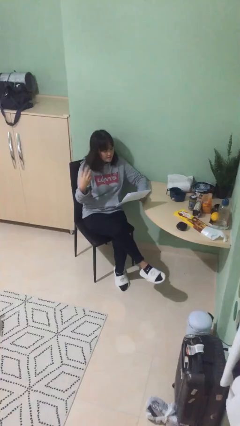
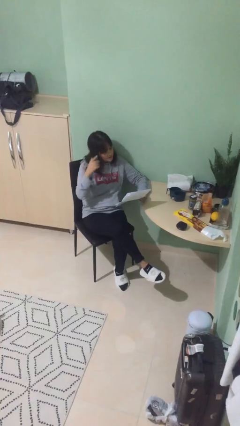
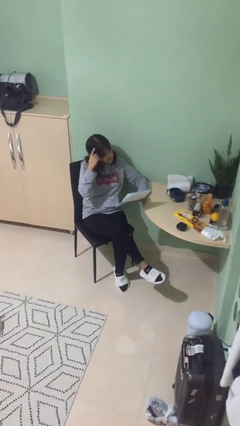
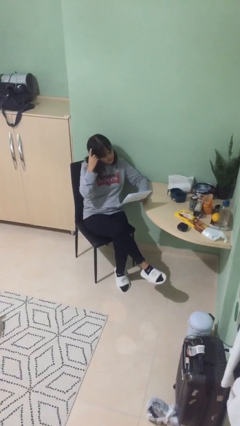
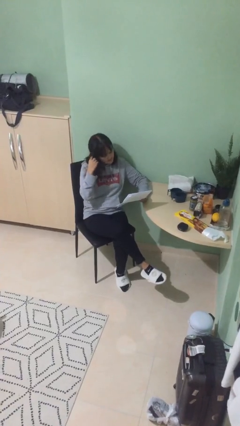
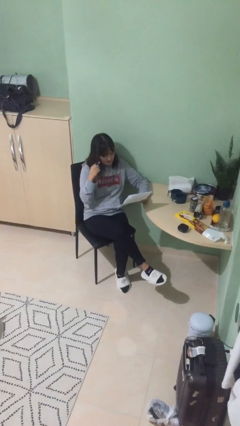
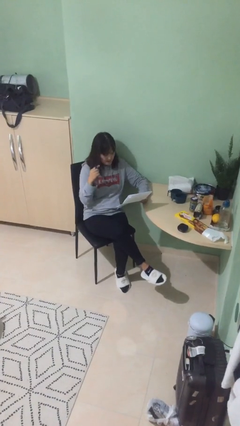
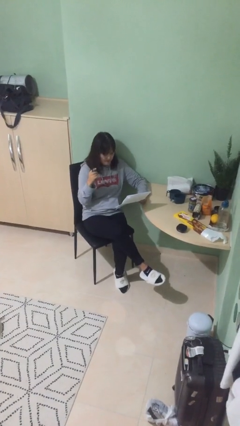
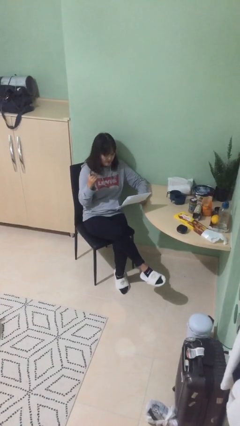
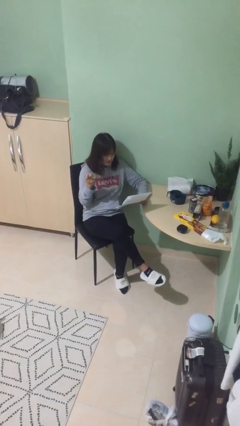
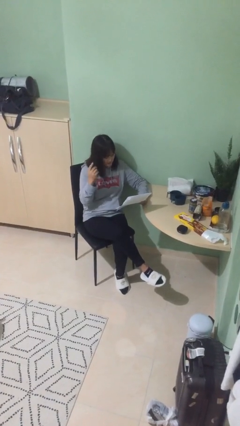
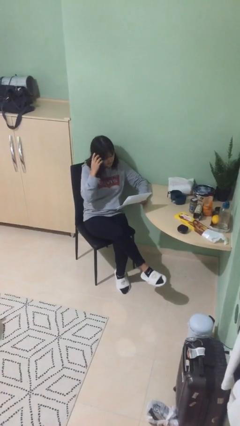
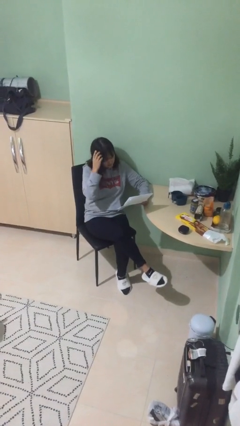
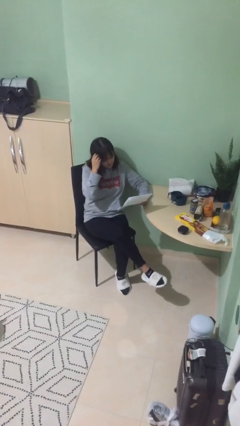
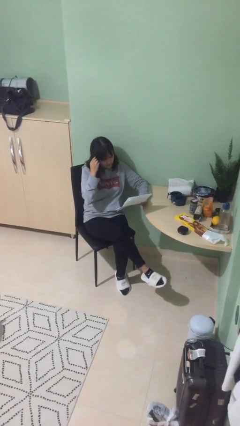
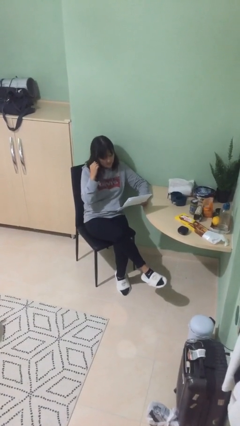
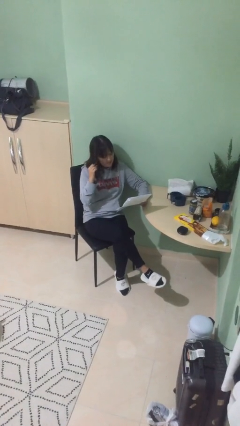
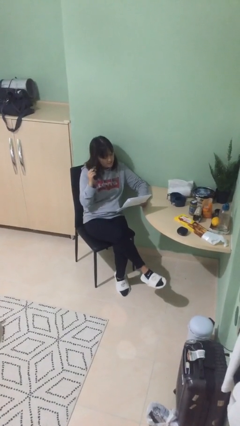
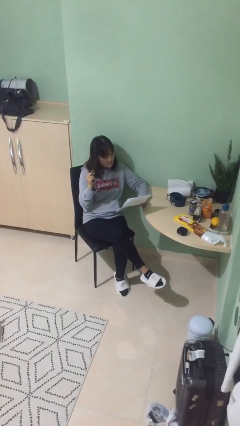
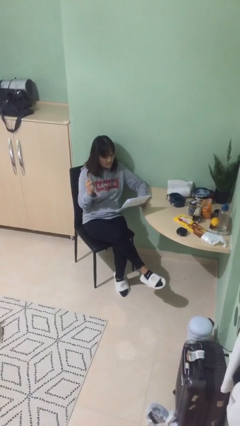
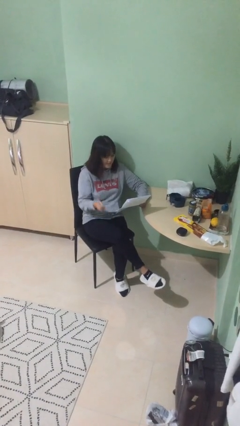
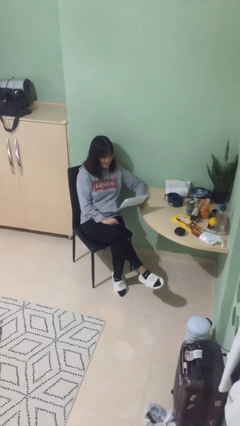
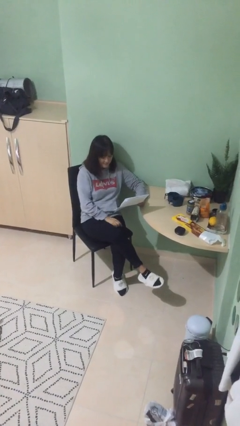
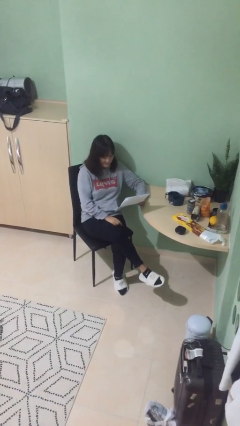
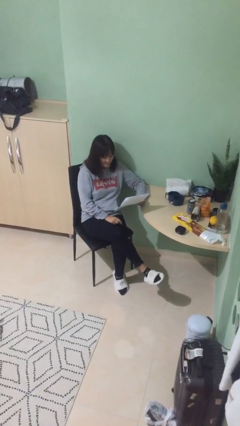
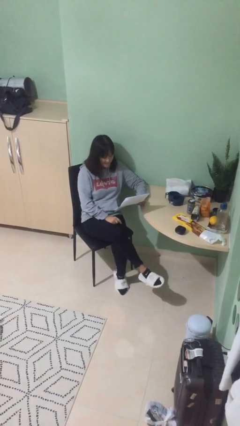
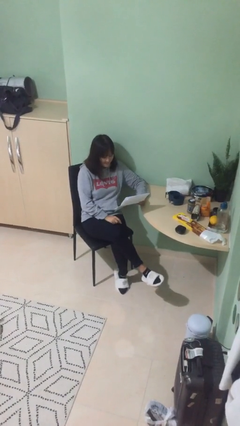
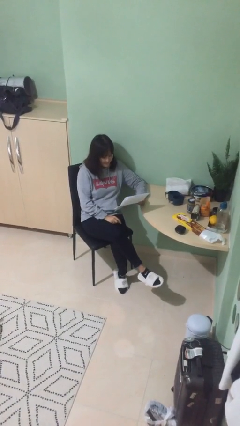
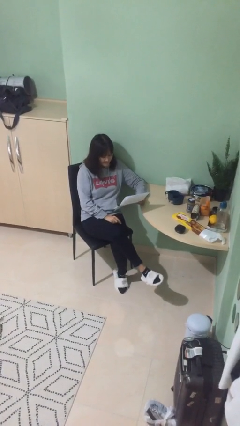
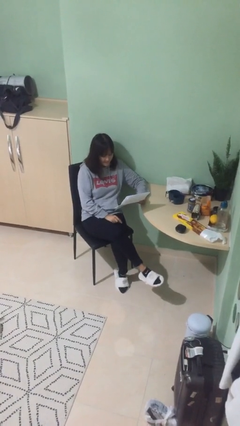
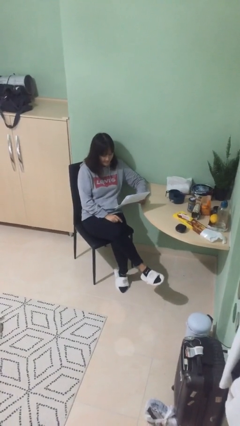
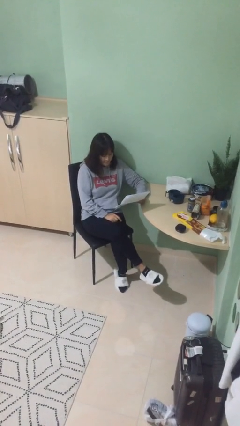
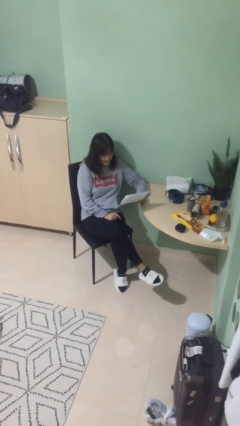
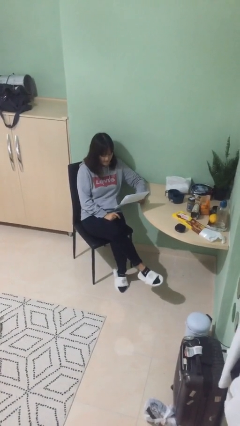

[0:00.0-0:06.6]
person reads document

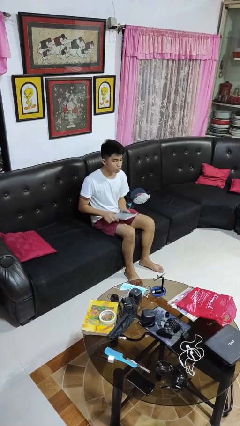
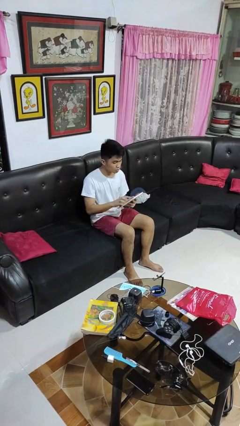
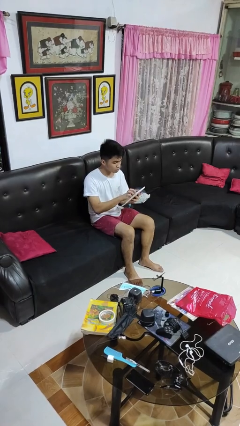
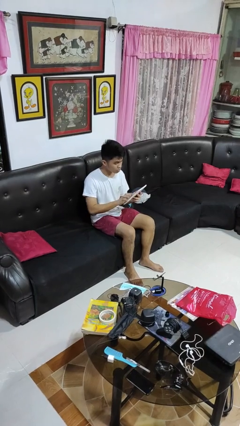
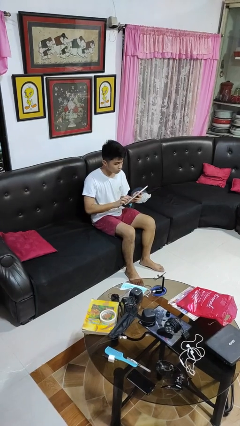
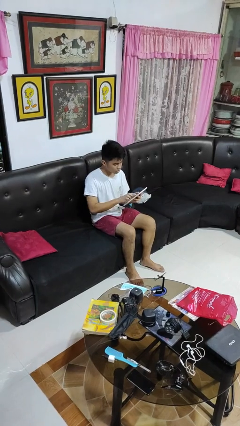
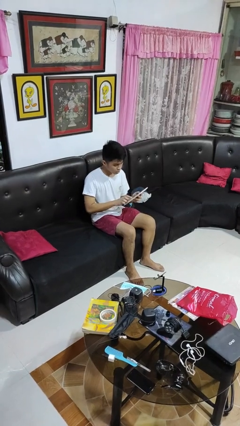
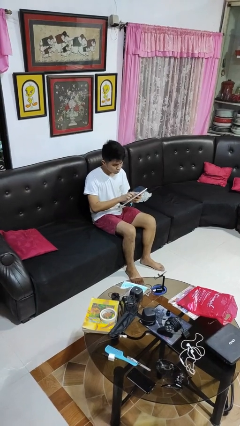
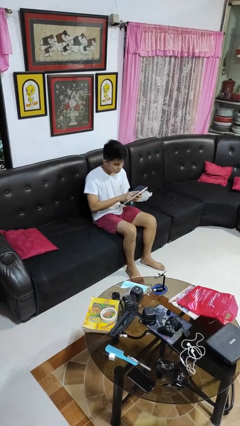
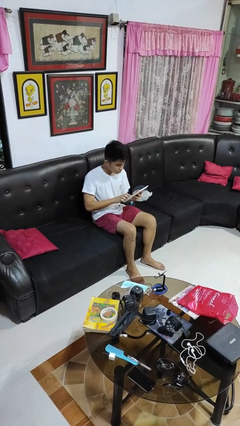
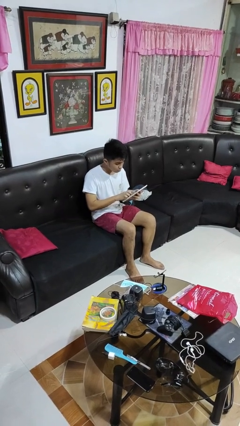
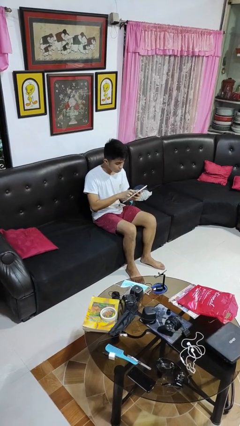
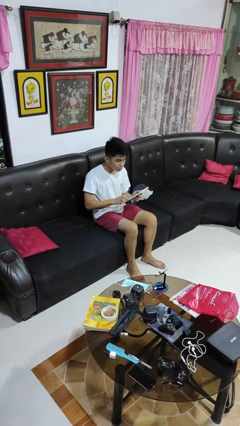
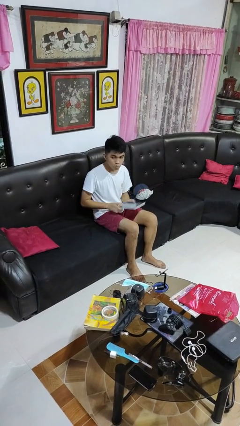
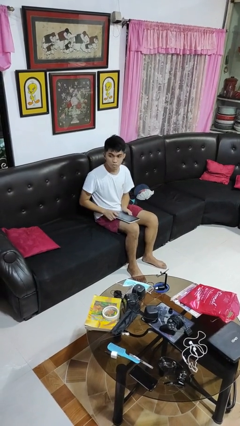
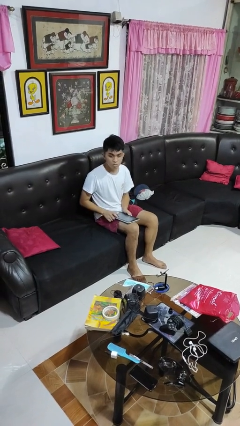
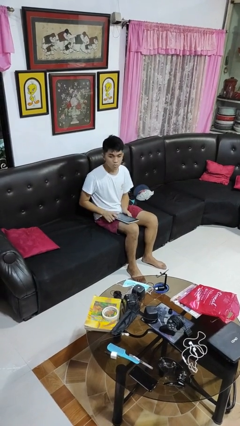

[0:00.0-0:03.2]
person interacts with tablet

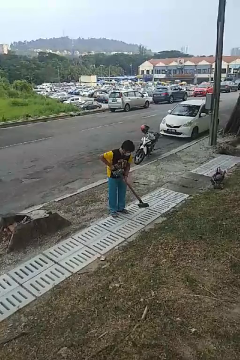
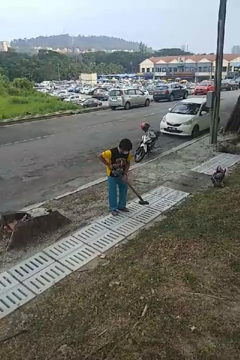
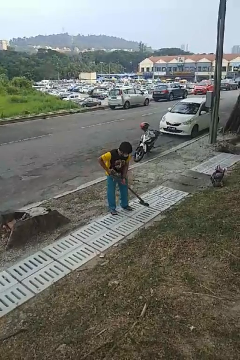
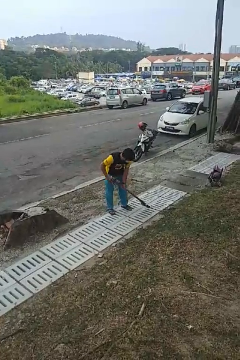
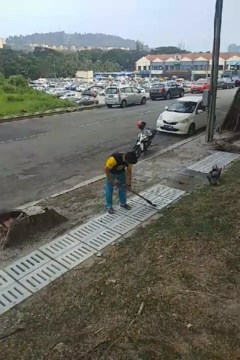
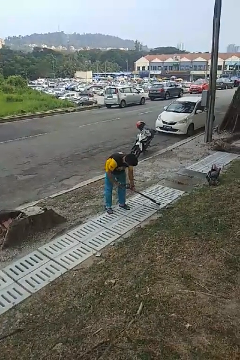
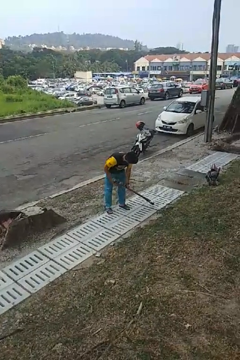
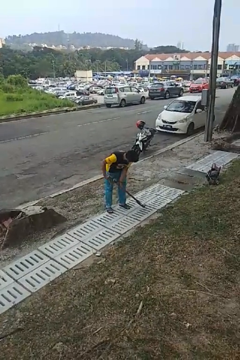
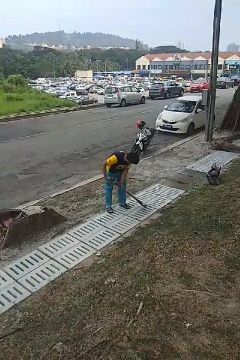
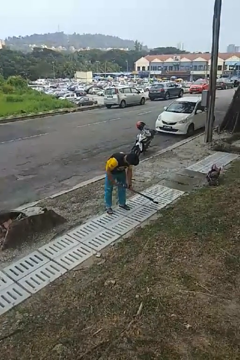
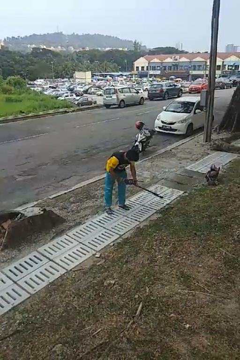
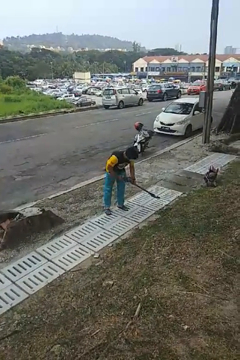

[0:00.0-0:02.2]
person vacuums carpet

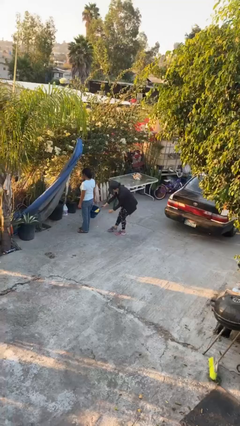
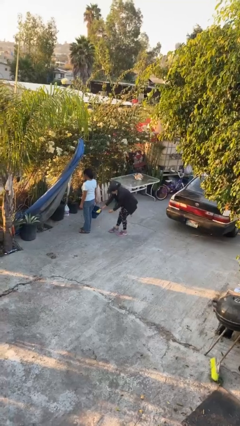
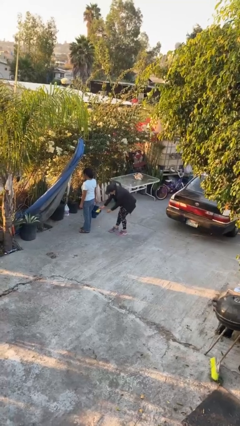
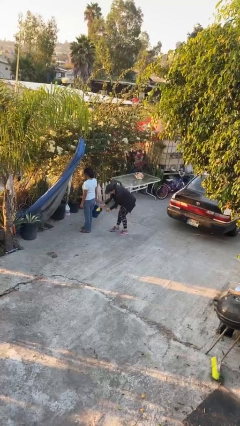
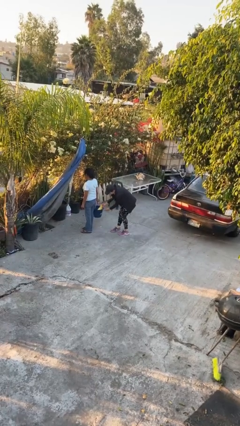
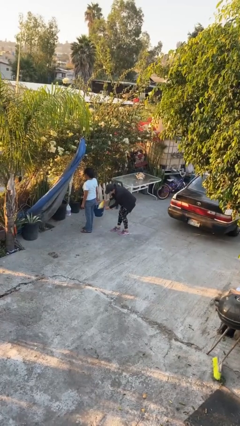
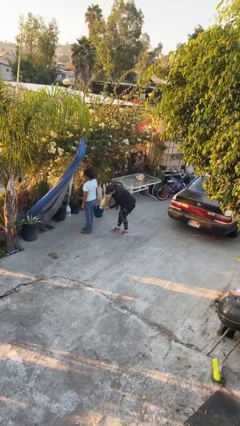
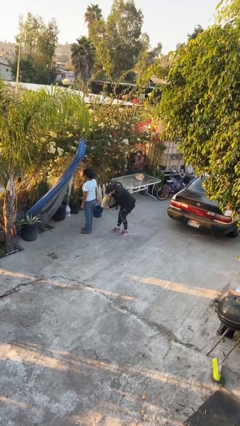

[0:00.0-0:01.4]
person steals object from person

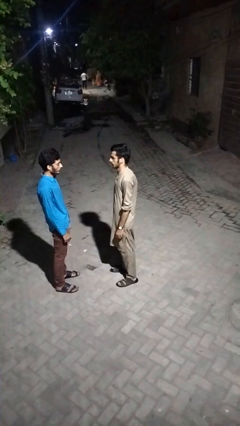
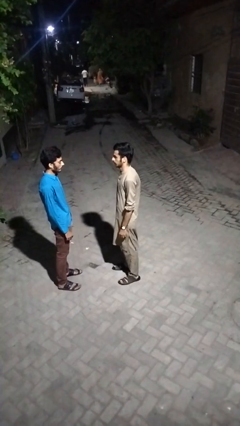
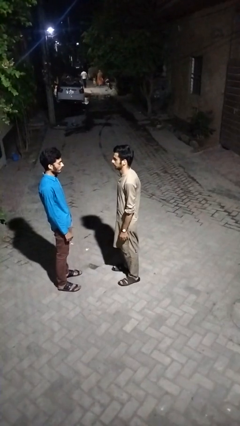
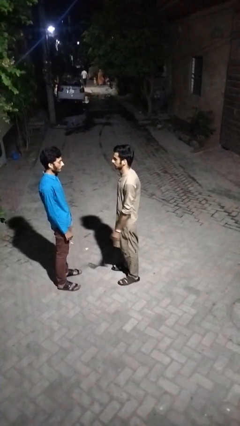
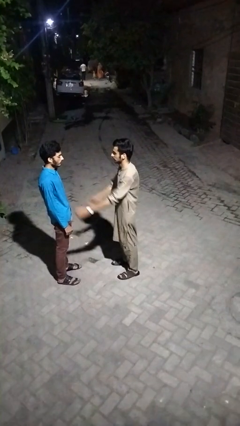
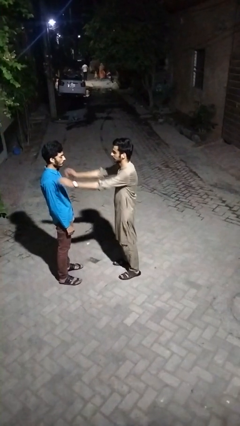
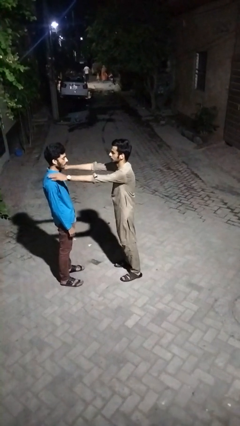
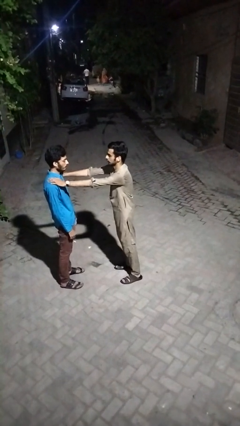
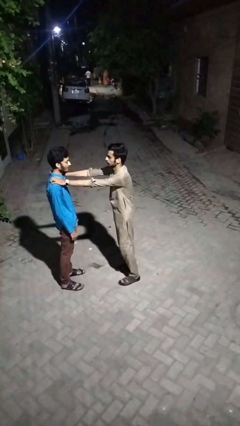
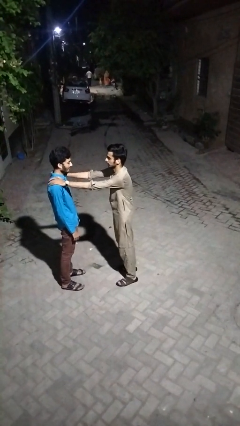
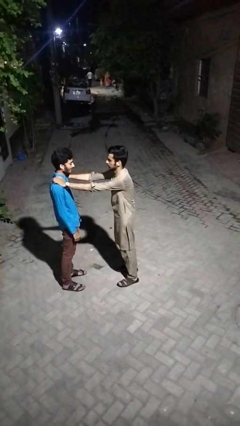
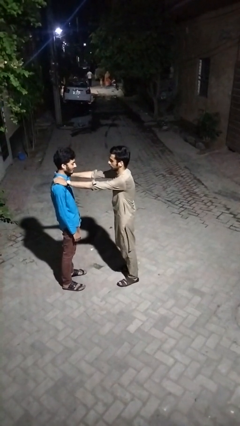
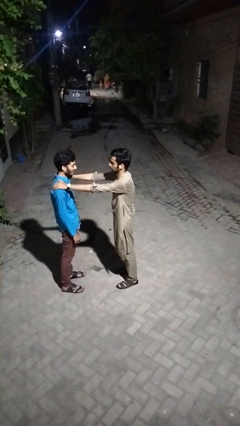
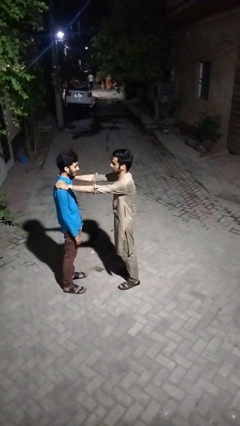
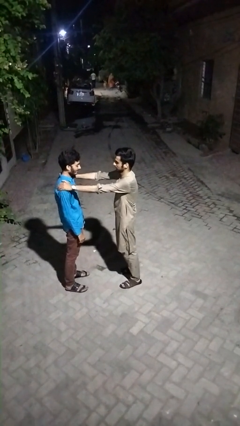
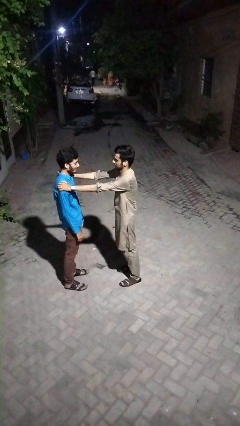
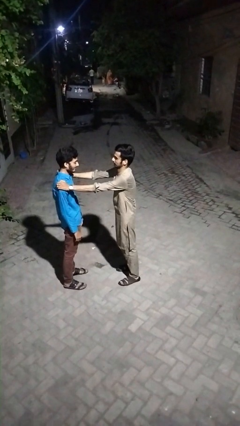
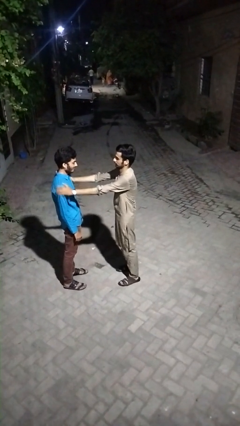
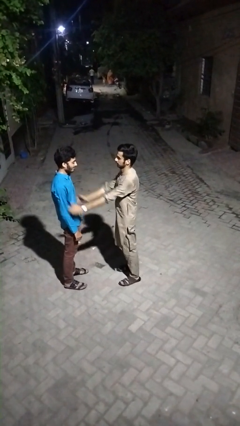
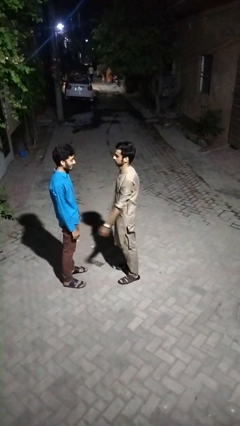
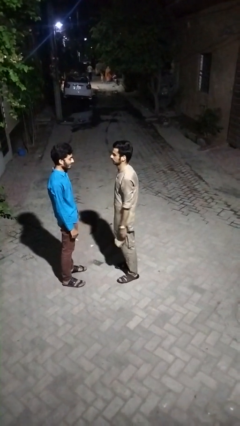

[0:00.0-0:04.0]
person pounds shoulders of person

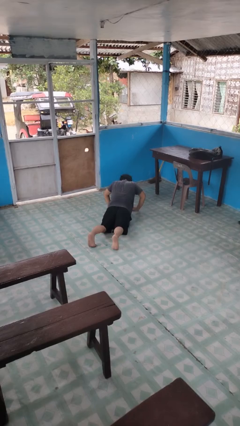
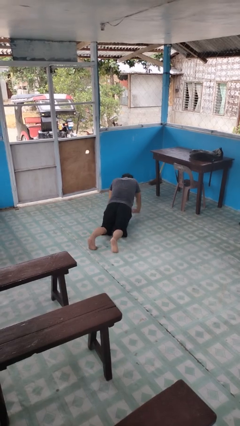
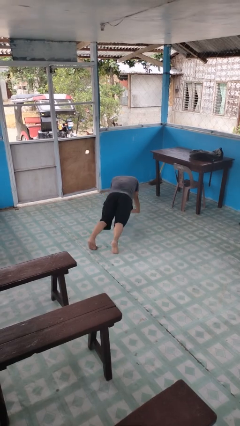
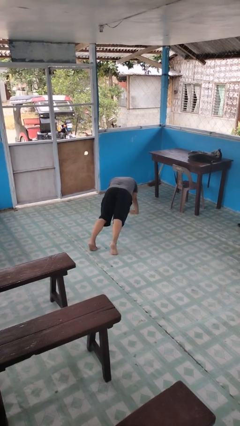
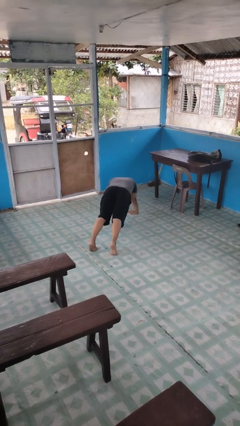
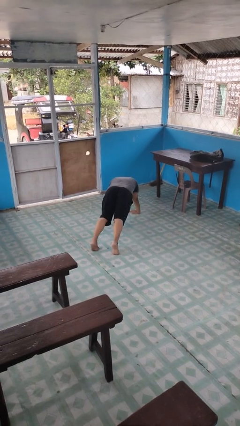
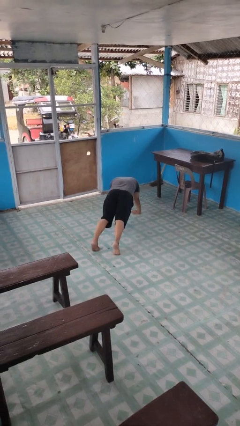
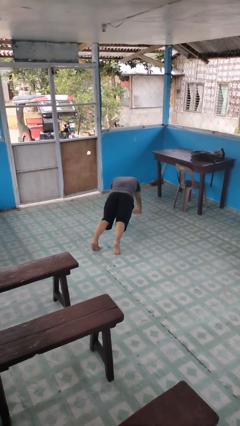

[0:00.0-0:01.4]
person exercises with pushup
